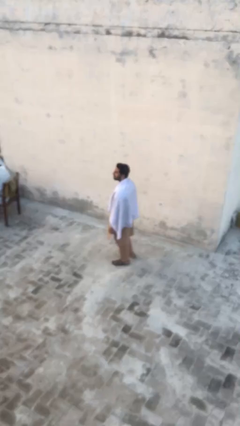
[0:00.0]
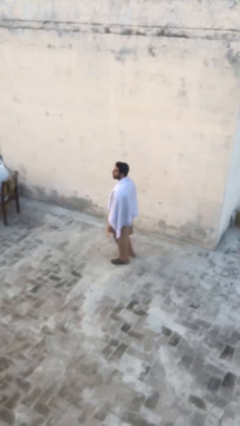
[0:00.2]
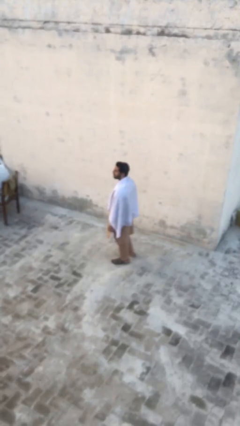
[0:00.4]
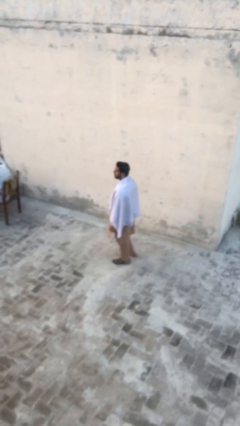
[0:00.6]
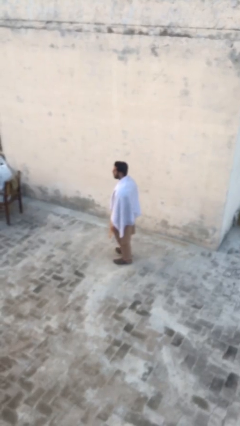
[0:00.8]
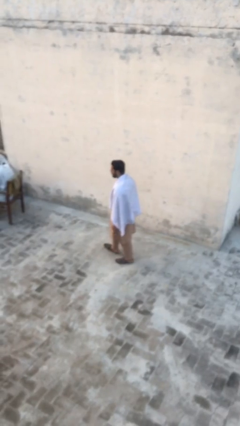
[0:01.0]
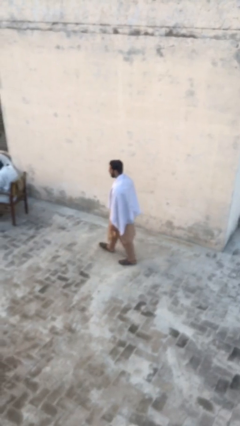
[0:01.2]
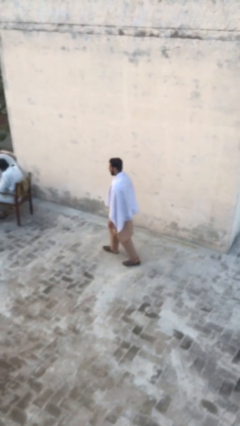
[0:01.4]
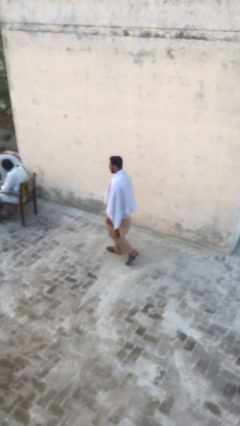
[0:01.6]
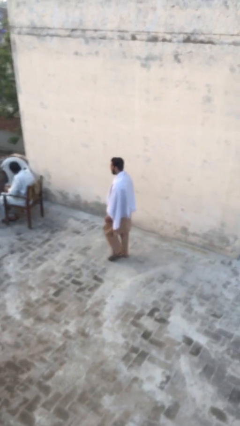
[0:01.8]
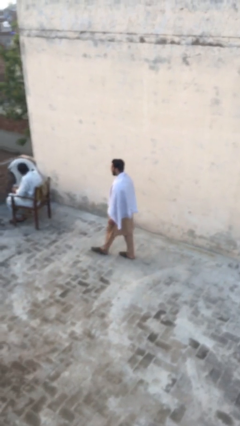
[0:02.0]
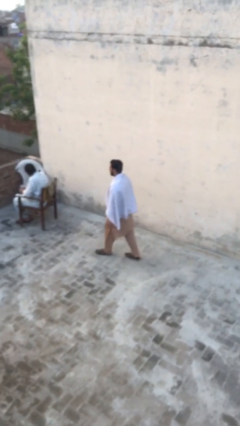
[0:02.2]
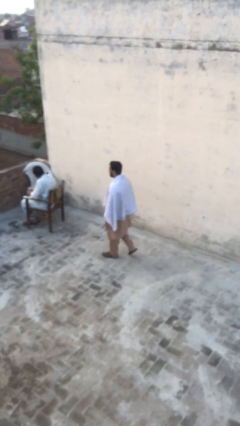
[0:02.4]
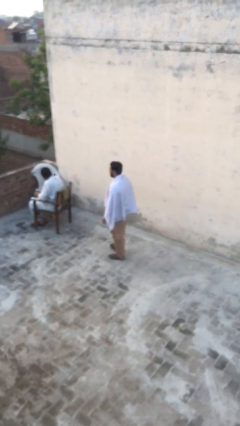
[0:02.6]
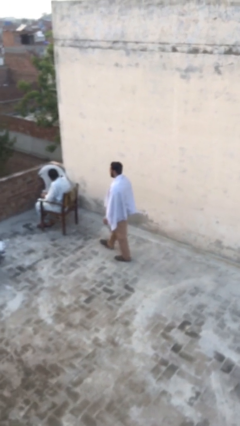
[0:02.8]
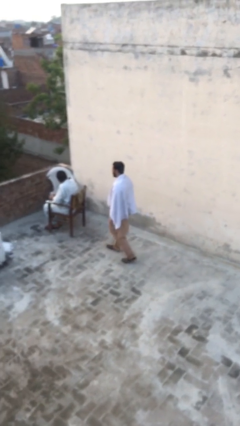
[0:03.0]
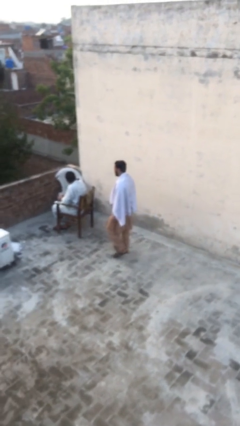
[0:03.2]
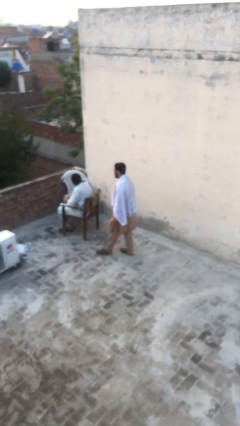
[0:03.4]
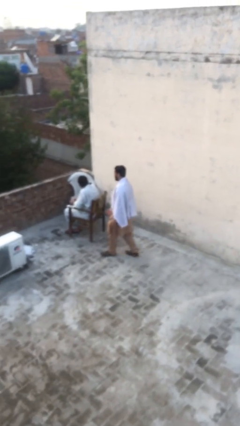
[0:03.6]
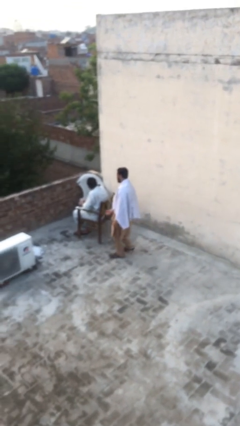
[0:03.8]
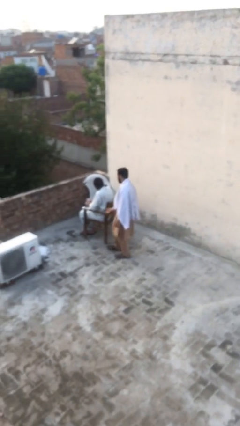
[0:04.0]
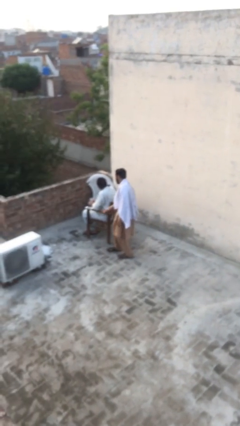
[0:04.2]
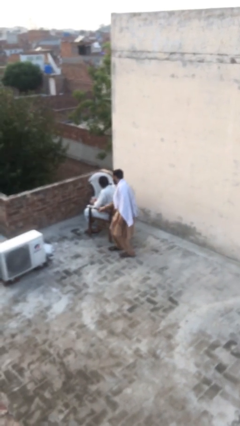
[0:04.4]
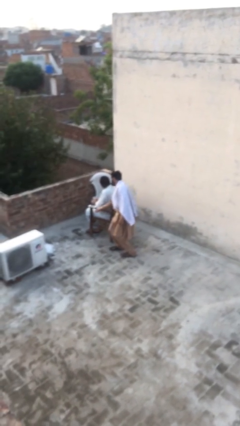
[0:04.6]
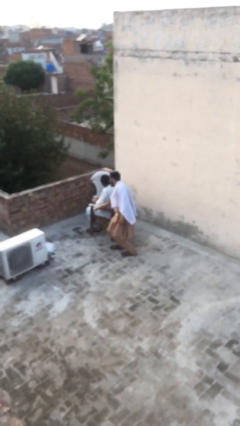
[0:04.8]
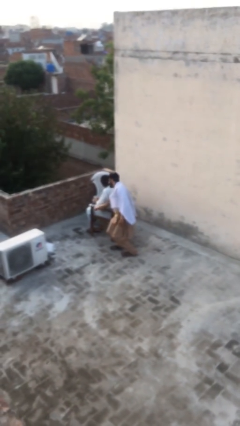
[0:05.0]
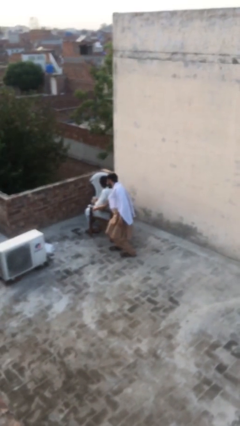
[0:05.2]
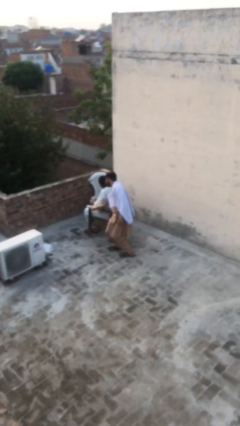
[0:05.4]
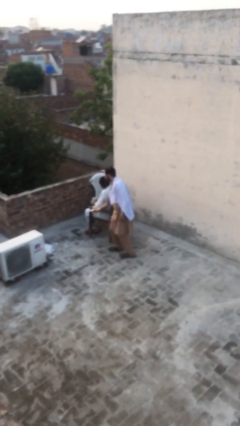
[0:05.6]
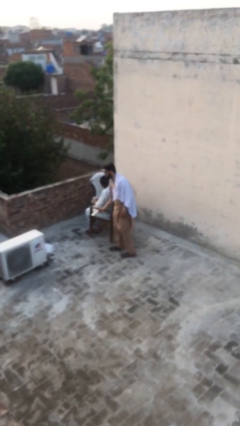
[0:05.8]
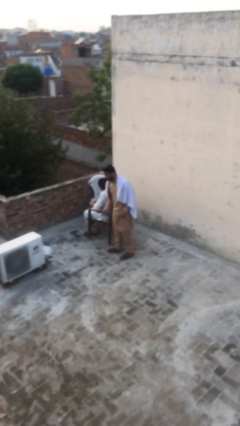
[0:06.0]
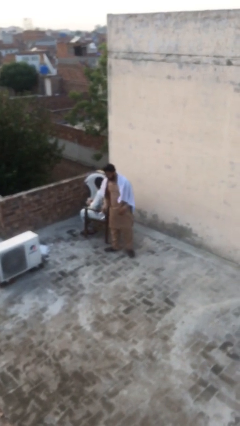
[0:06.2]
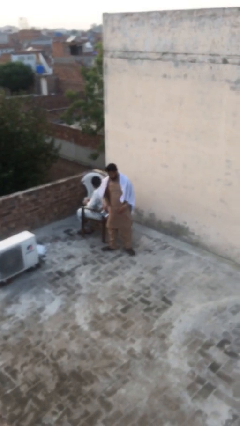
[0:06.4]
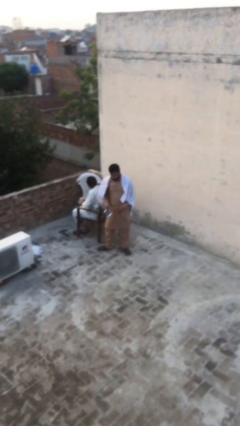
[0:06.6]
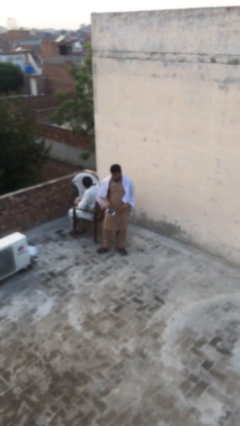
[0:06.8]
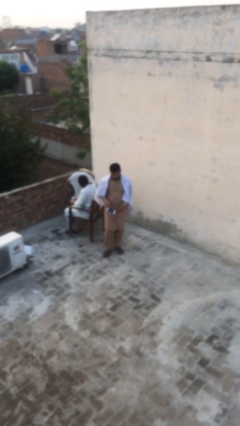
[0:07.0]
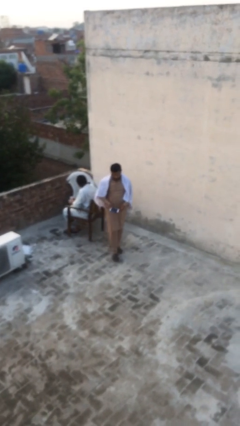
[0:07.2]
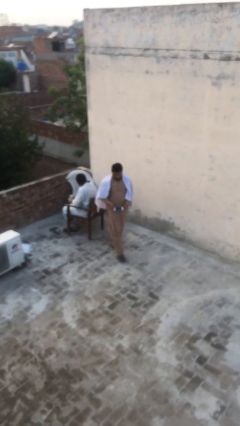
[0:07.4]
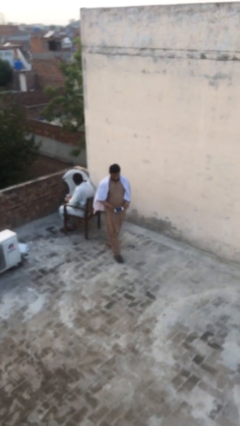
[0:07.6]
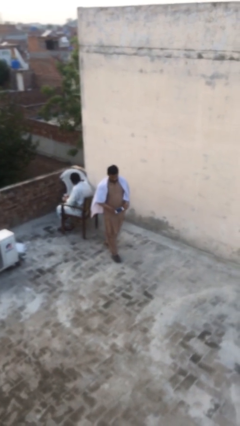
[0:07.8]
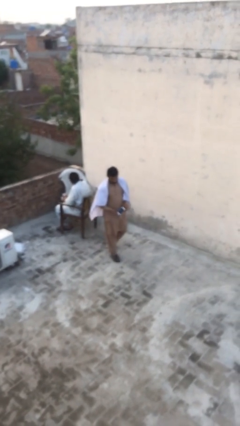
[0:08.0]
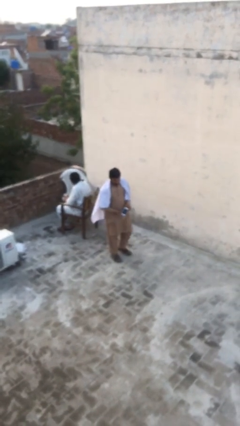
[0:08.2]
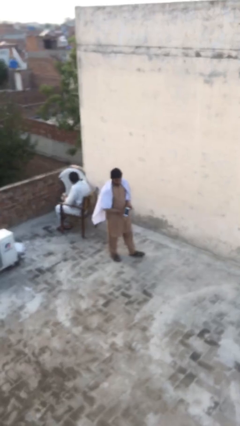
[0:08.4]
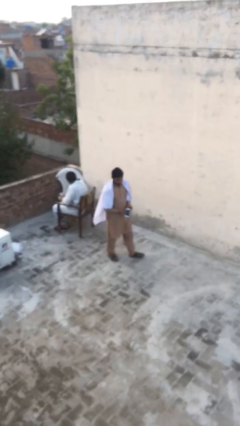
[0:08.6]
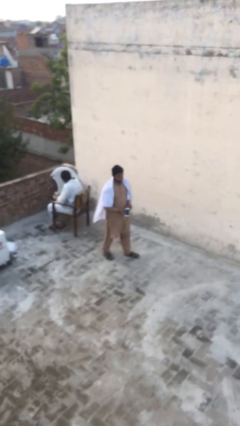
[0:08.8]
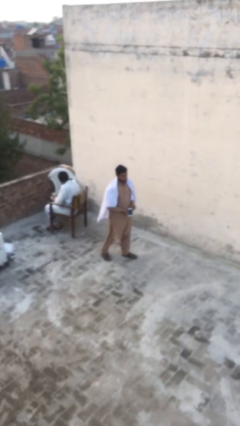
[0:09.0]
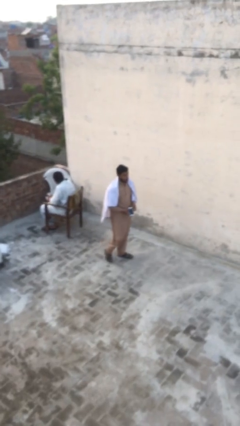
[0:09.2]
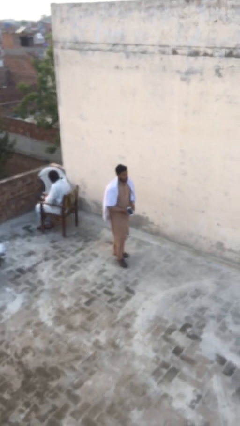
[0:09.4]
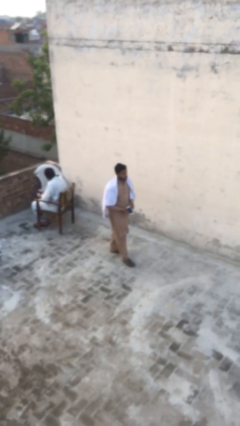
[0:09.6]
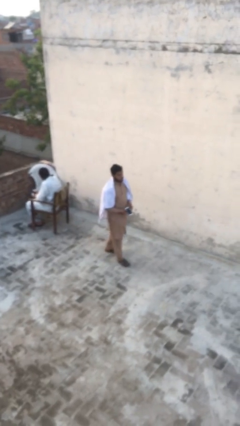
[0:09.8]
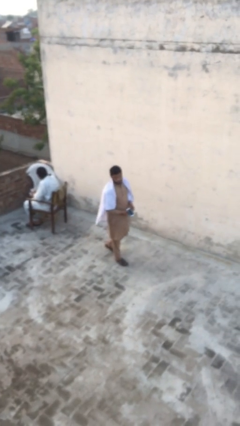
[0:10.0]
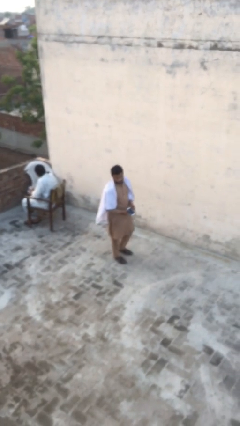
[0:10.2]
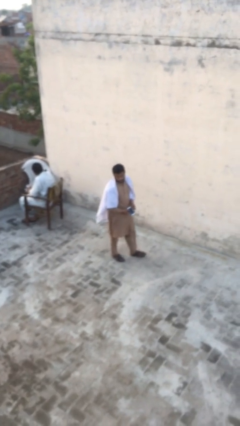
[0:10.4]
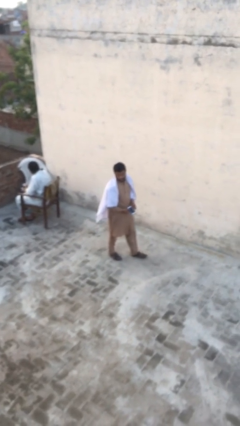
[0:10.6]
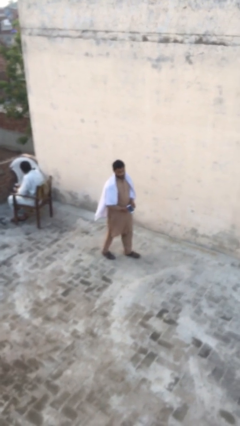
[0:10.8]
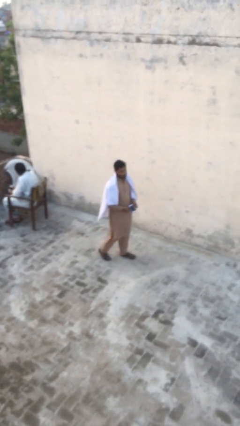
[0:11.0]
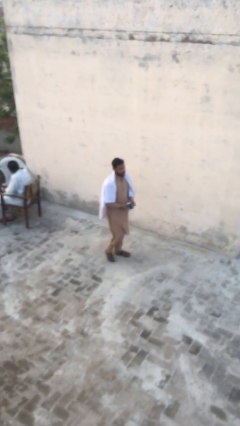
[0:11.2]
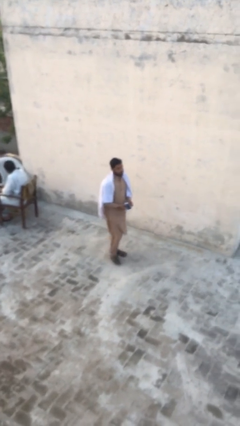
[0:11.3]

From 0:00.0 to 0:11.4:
person steals object from person

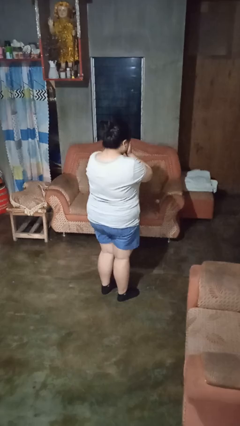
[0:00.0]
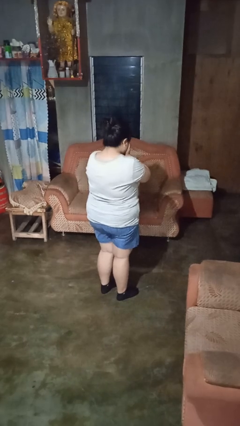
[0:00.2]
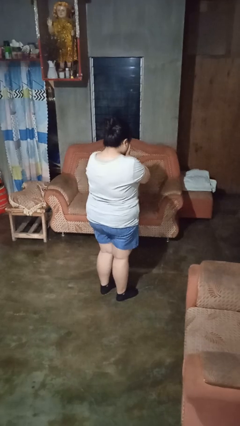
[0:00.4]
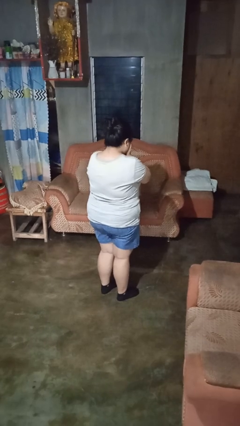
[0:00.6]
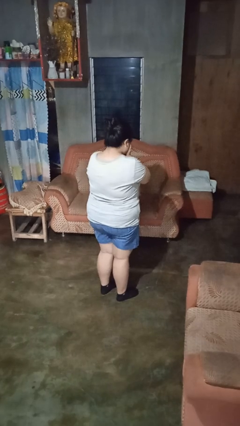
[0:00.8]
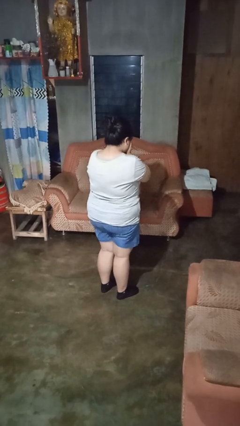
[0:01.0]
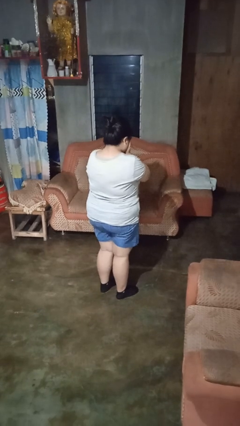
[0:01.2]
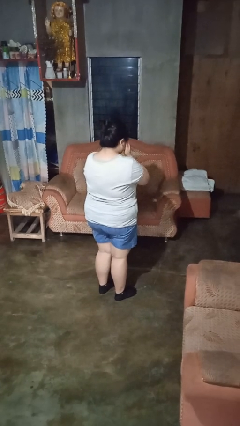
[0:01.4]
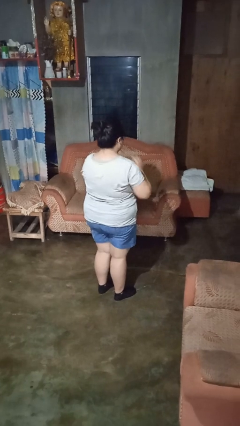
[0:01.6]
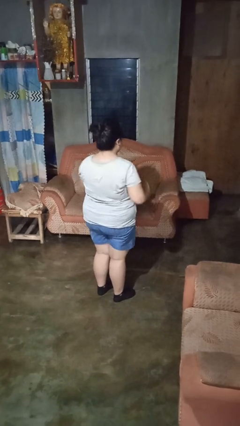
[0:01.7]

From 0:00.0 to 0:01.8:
person covers face with hands

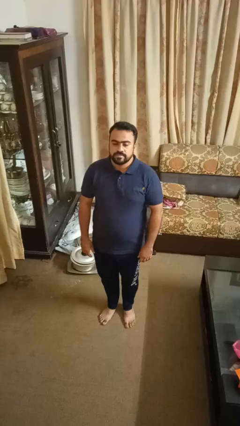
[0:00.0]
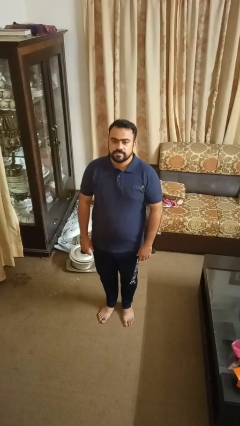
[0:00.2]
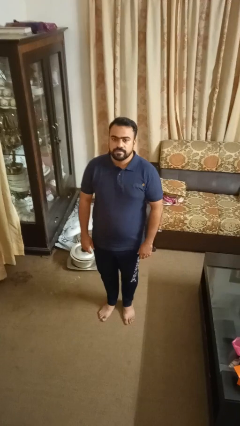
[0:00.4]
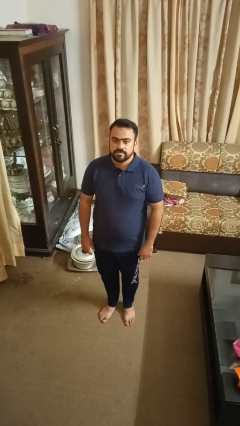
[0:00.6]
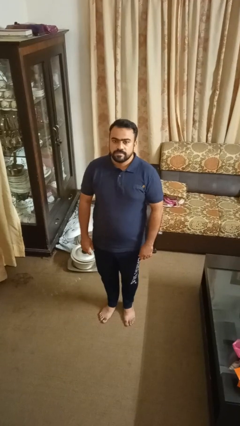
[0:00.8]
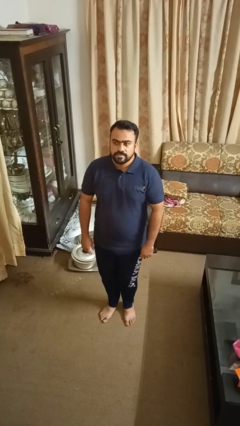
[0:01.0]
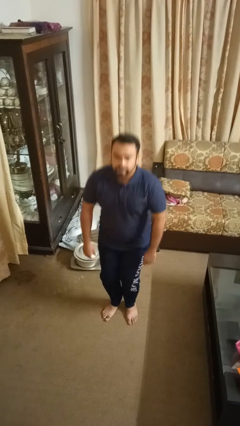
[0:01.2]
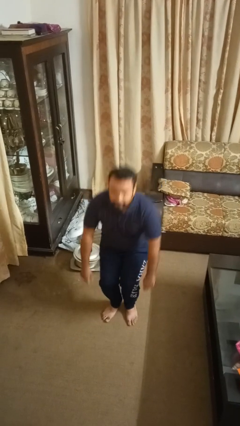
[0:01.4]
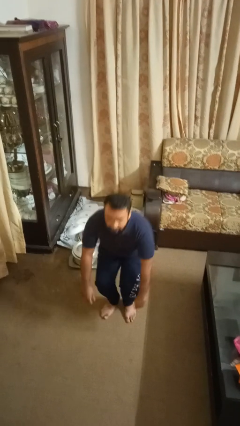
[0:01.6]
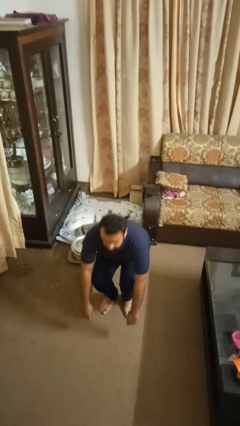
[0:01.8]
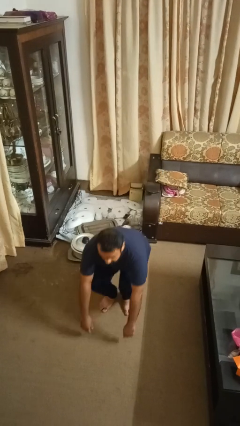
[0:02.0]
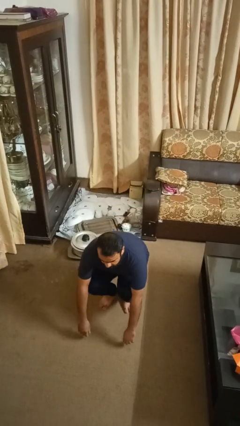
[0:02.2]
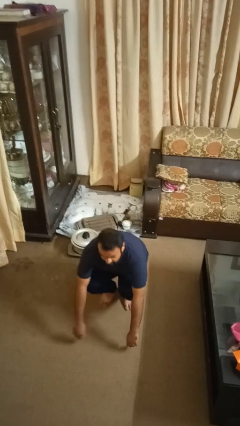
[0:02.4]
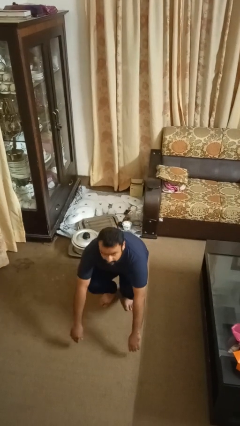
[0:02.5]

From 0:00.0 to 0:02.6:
person squats

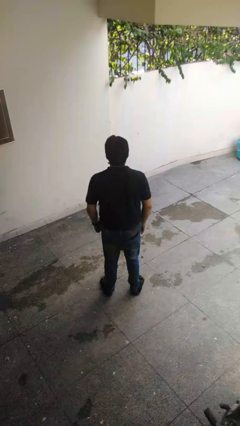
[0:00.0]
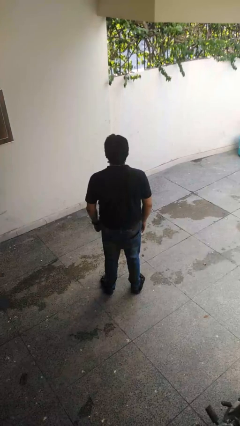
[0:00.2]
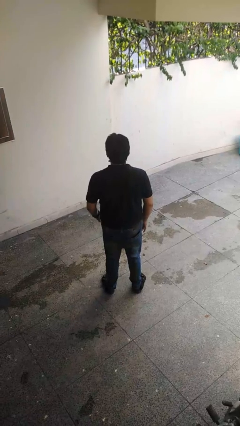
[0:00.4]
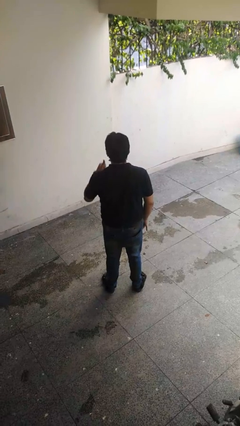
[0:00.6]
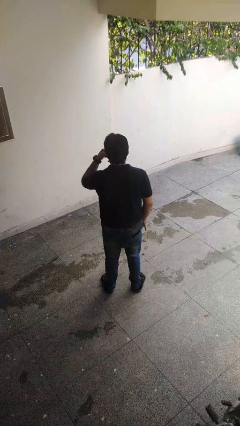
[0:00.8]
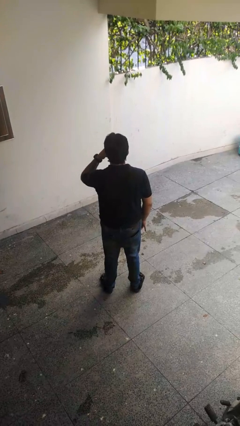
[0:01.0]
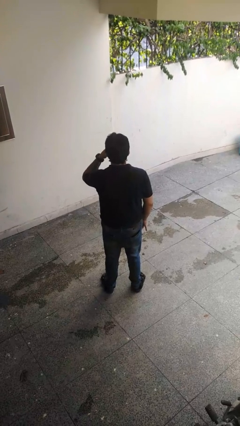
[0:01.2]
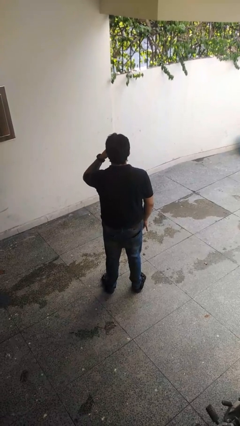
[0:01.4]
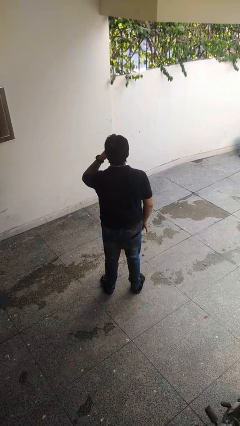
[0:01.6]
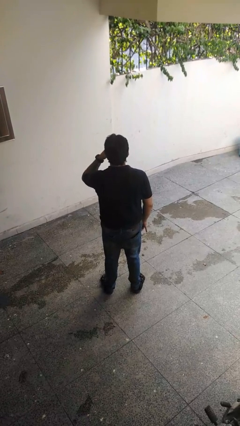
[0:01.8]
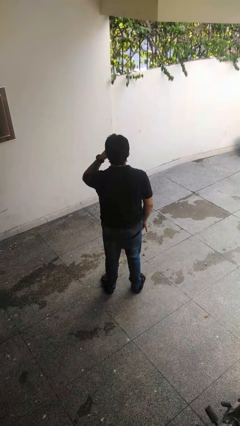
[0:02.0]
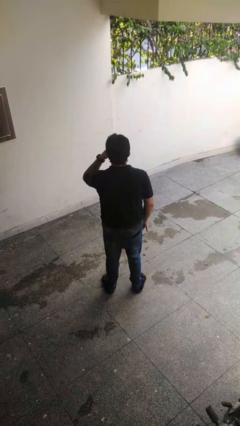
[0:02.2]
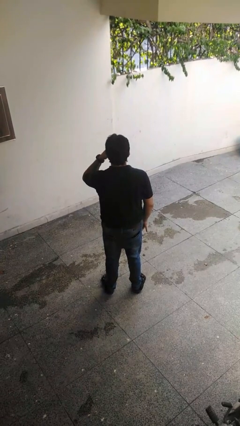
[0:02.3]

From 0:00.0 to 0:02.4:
person gestures call me
